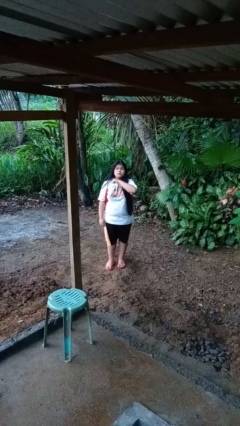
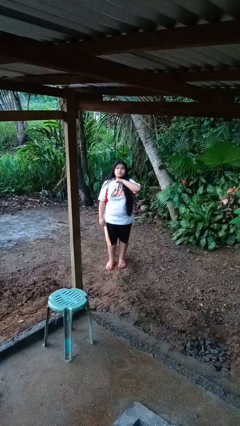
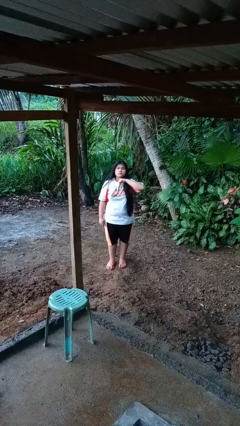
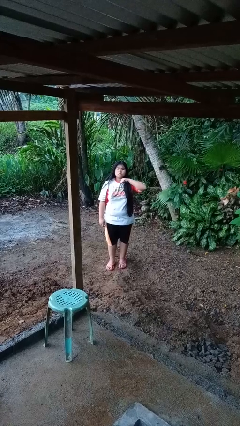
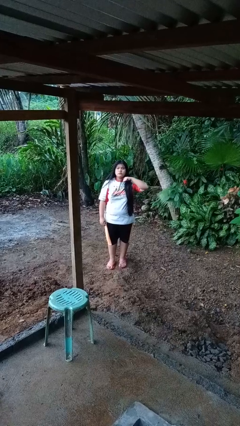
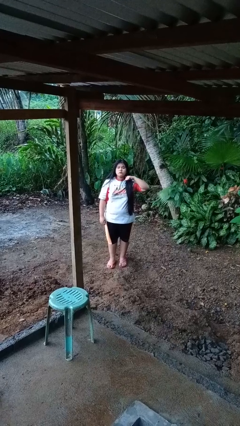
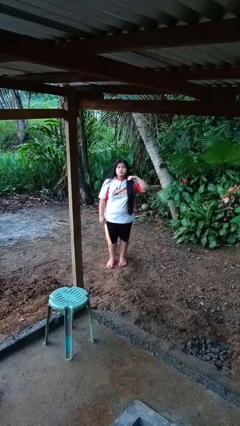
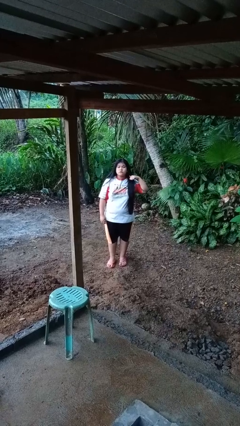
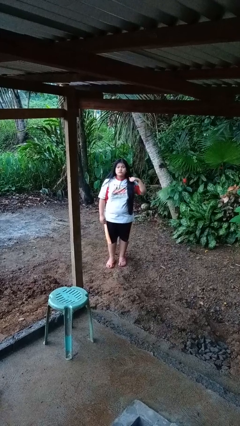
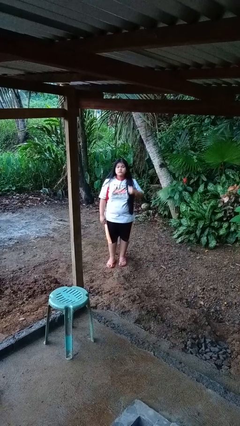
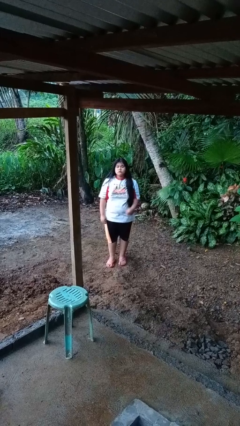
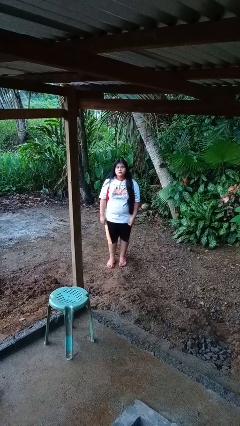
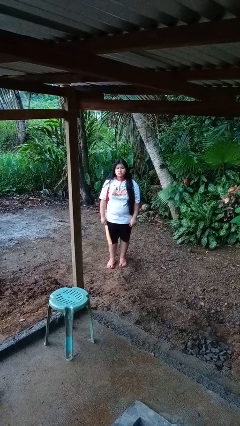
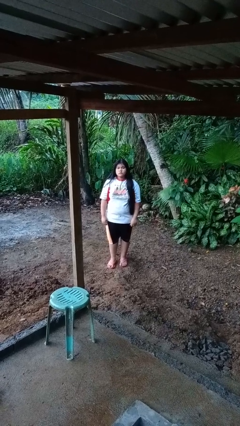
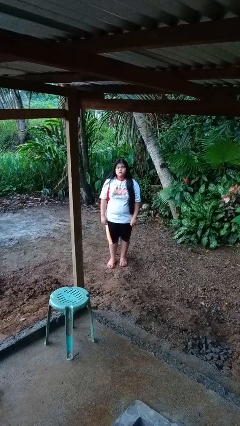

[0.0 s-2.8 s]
person gestures cut

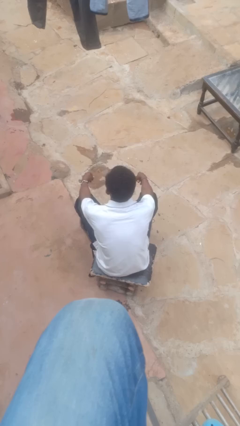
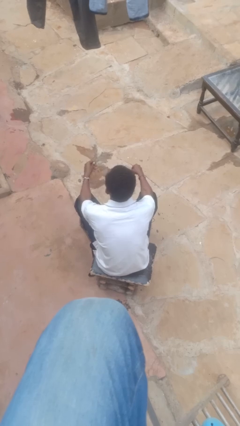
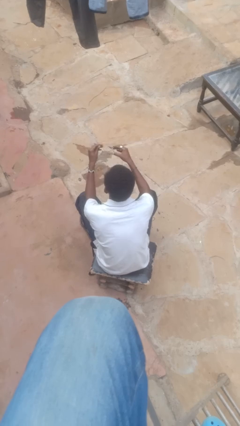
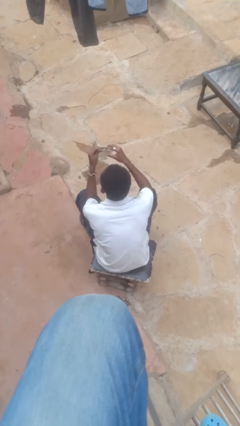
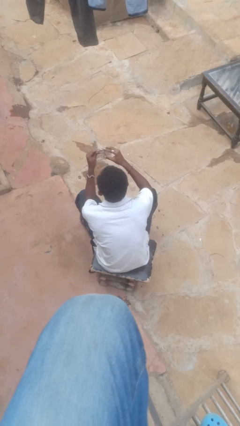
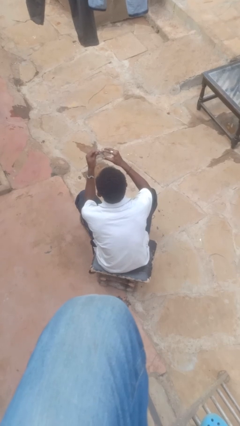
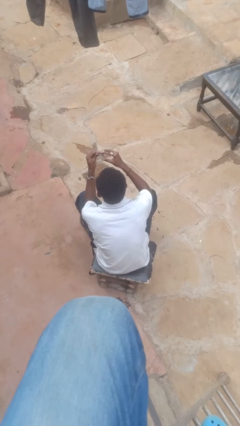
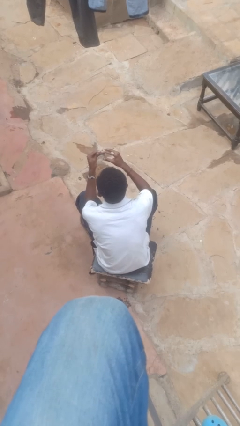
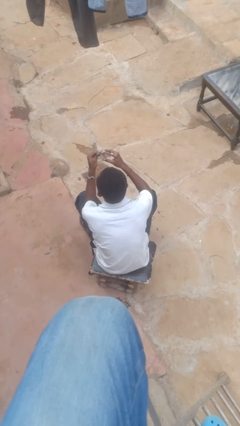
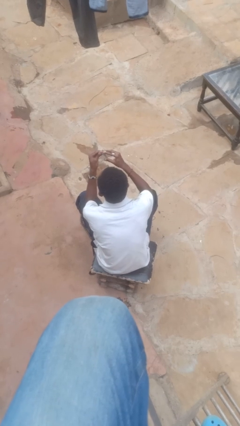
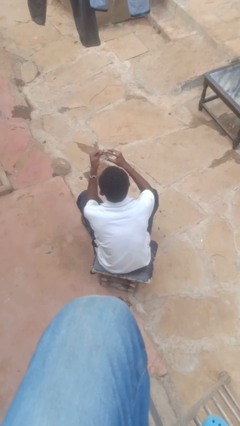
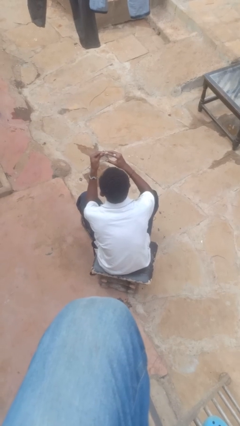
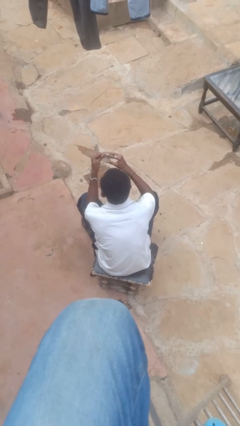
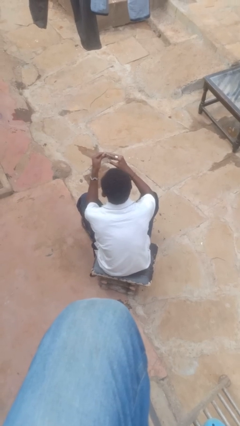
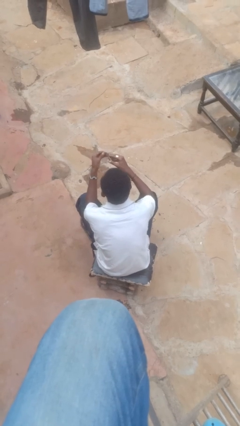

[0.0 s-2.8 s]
person clips fingernails

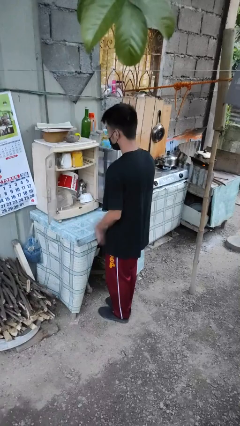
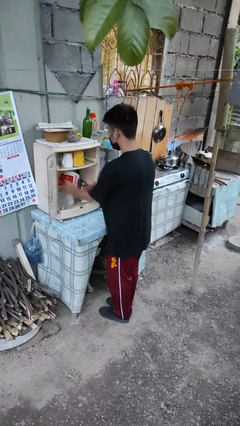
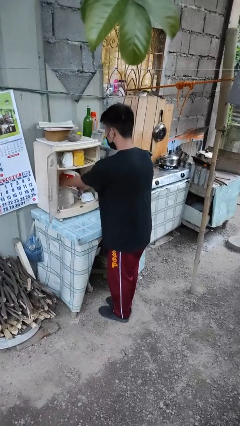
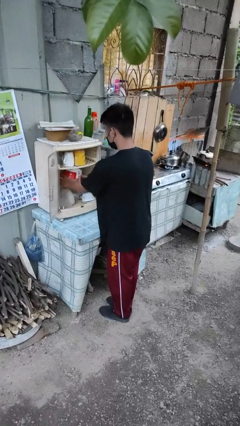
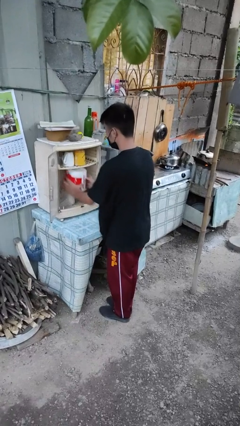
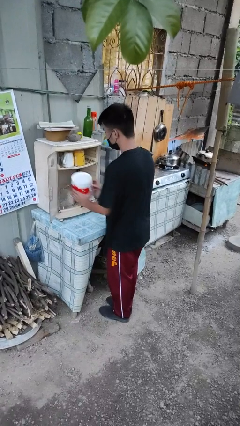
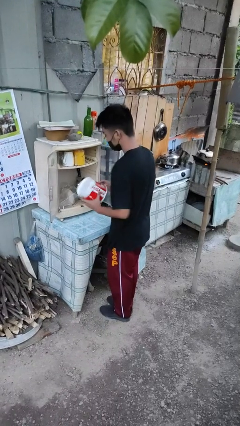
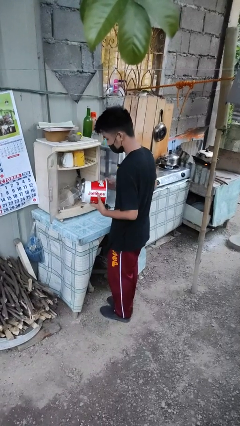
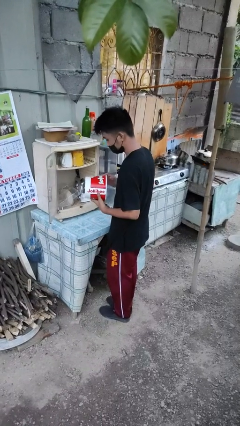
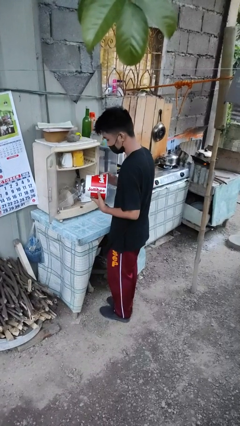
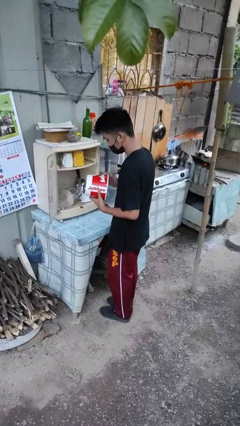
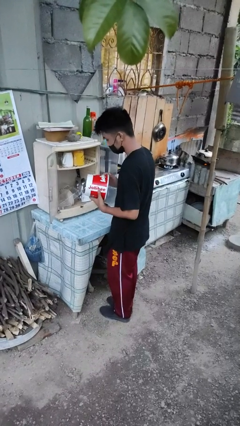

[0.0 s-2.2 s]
person picks up object from cabinet

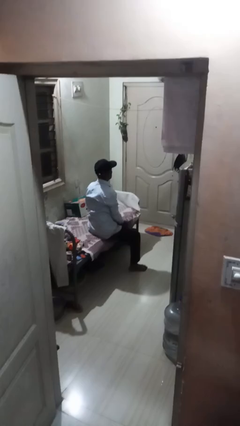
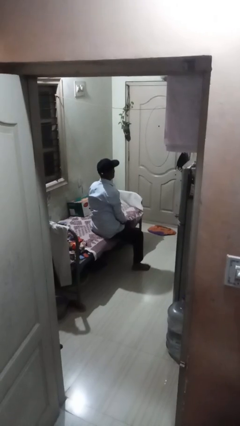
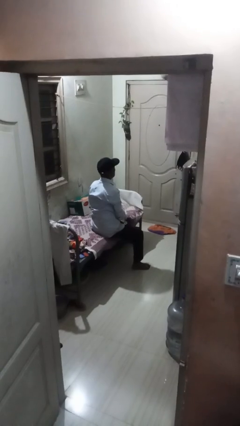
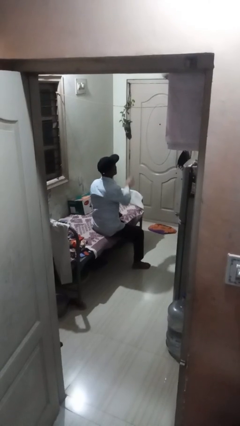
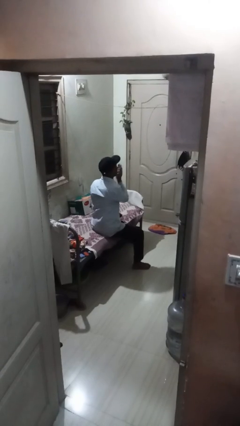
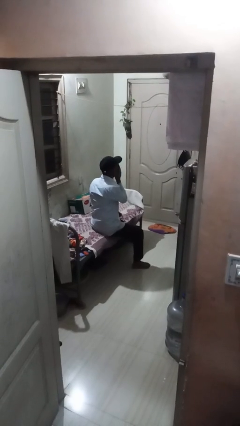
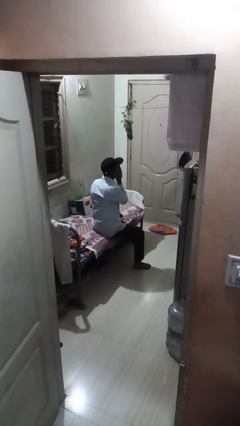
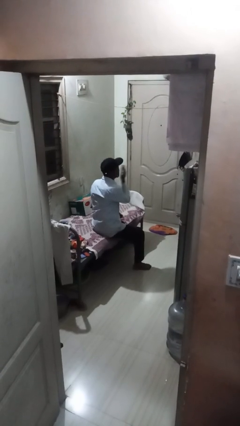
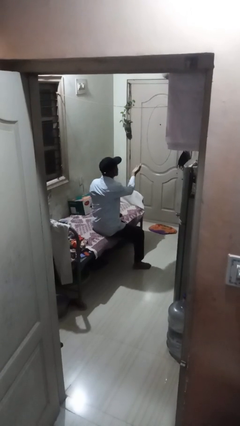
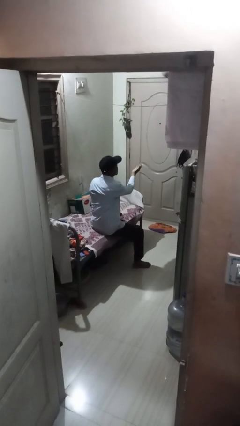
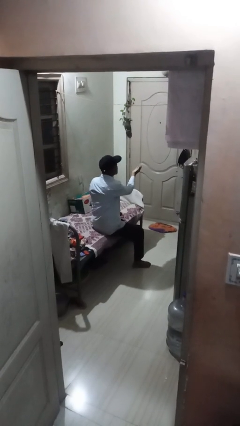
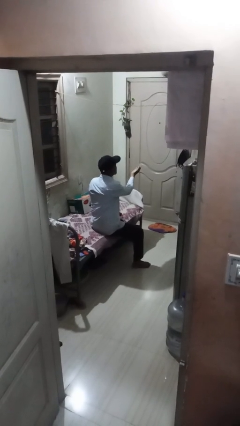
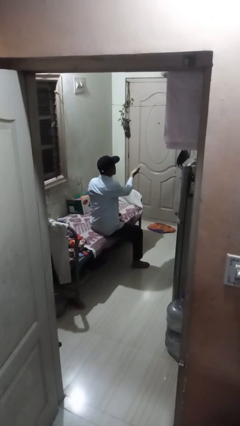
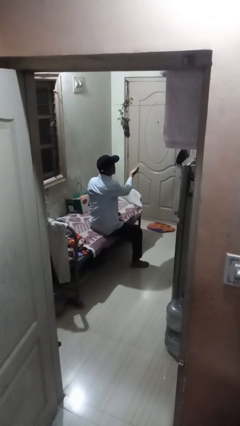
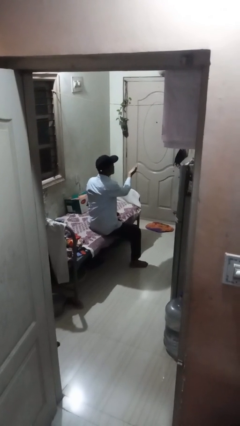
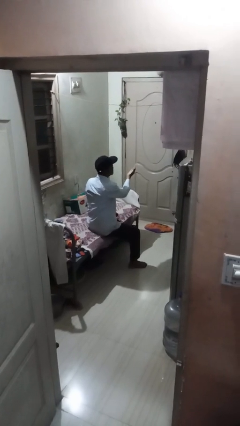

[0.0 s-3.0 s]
person gestures blow kiss

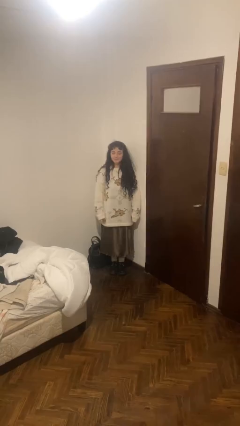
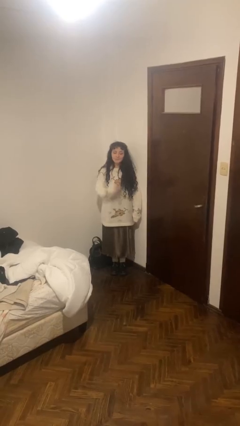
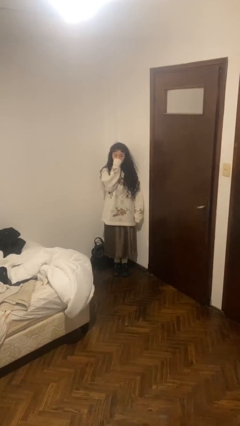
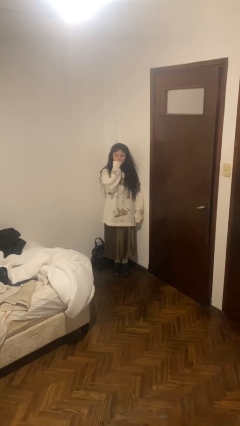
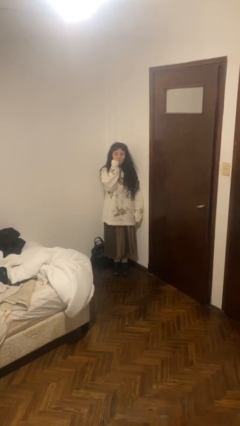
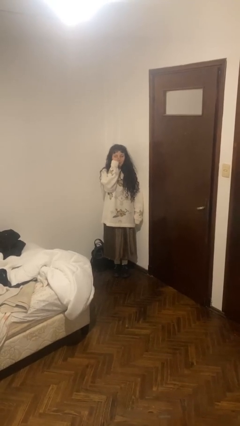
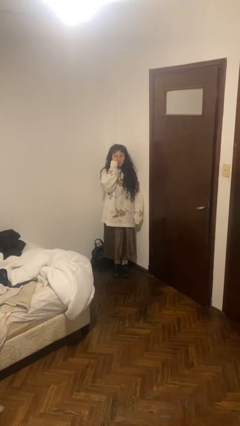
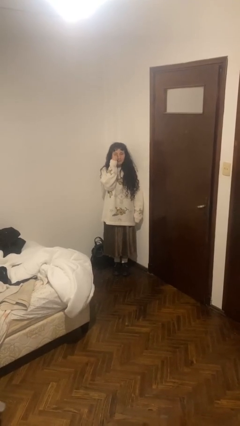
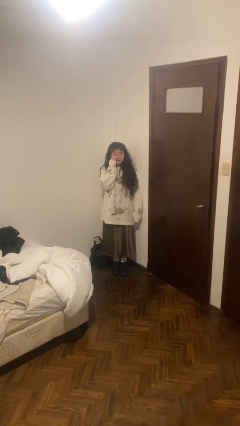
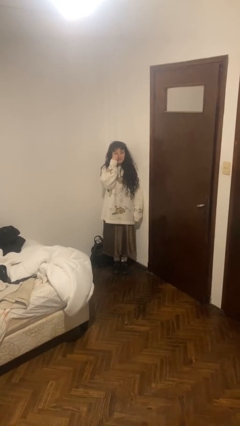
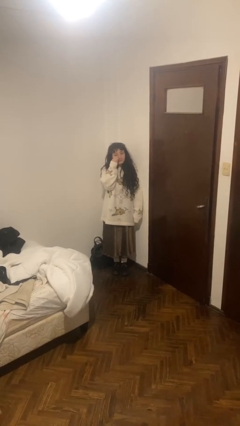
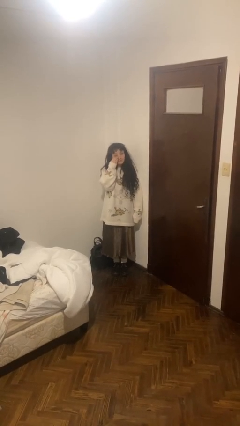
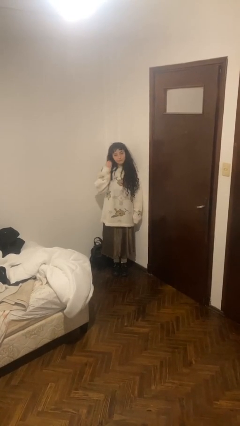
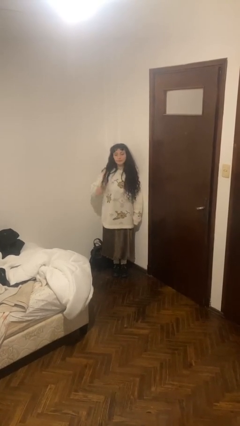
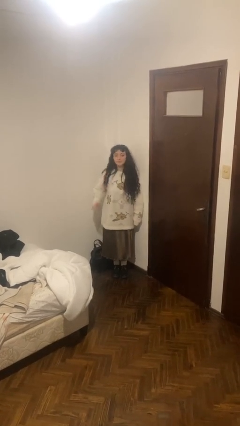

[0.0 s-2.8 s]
person scratches face

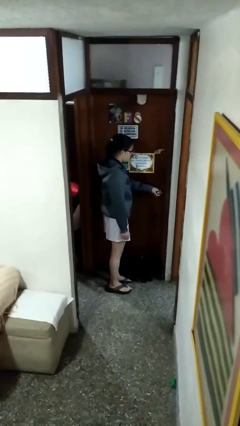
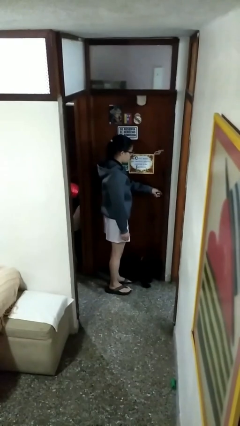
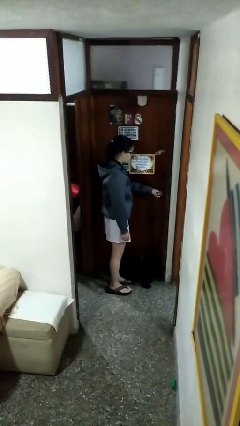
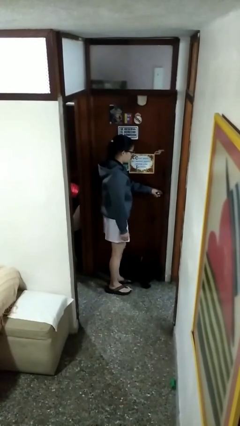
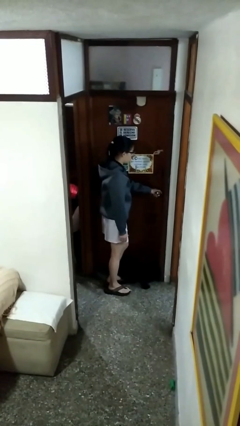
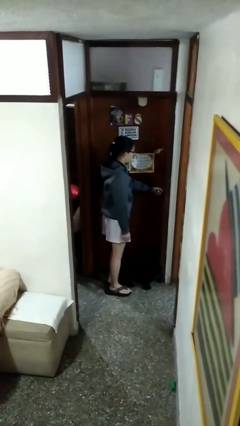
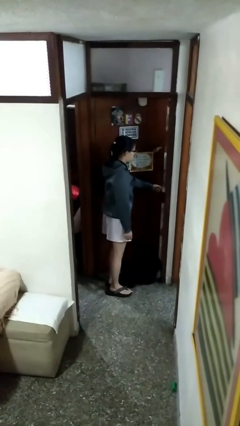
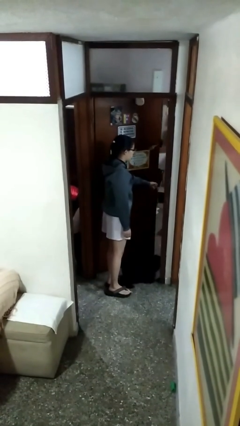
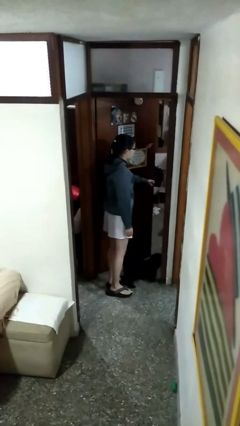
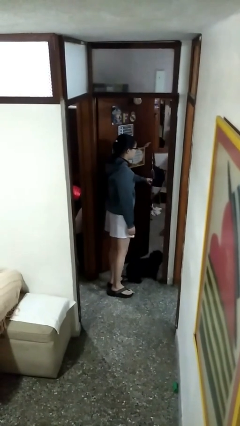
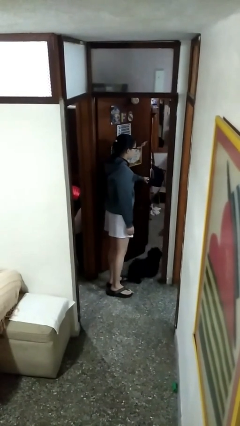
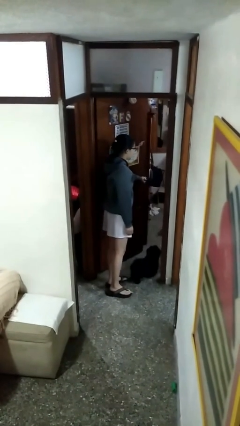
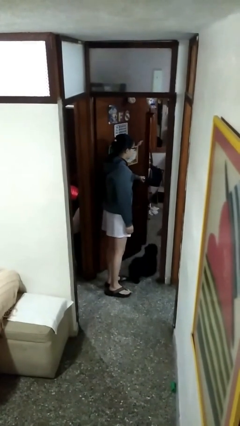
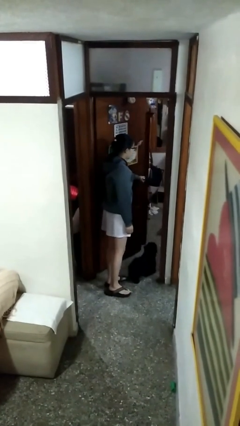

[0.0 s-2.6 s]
person opens facility door

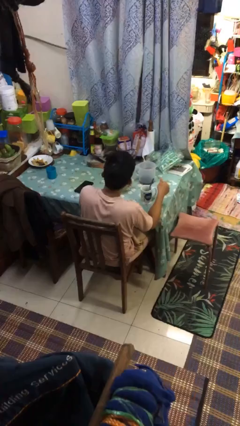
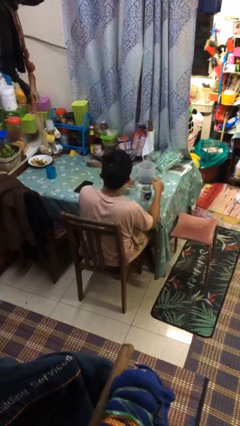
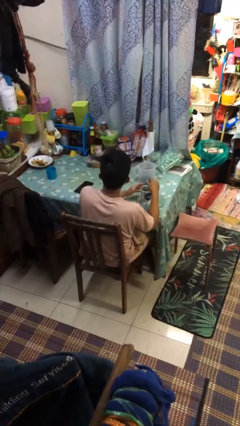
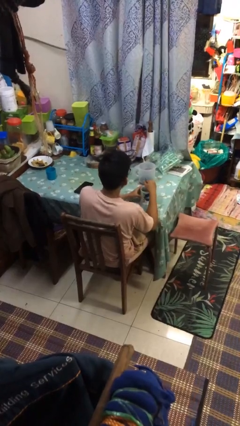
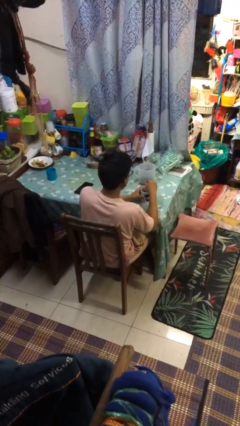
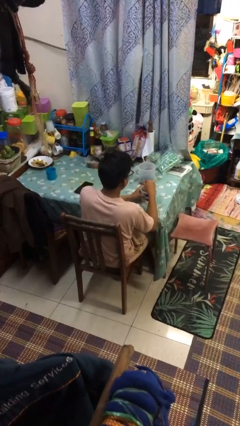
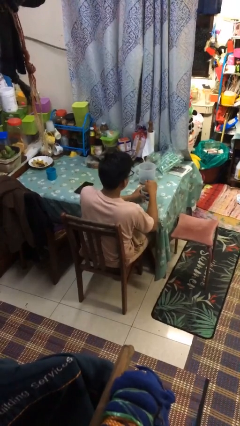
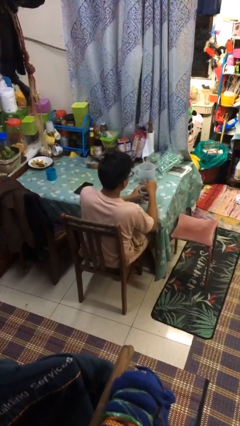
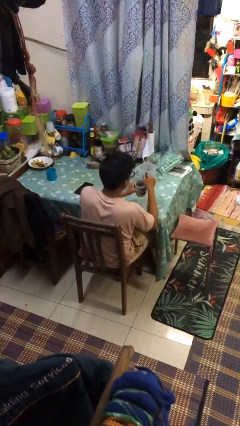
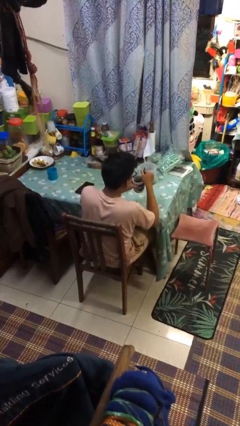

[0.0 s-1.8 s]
person stirs mug
